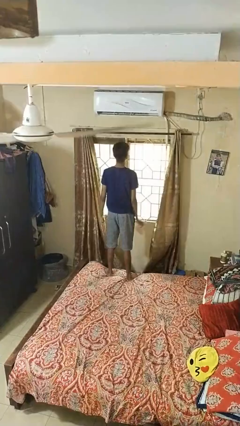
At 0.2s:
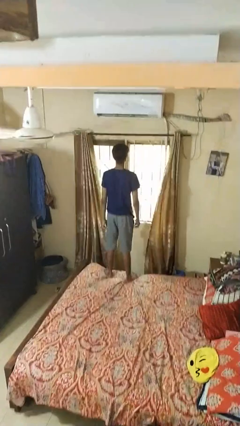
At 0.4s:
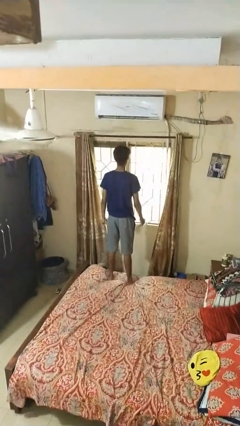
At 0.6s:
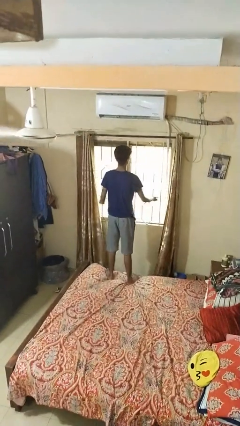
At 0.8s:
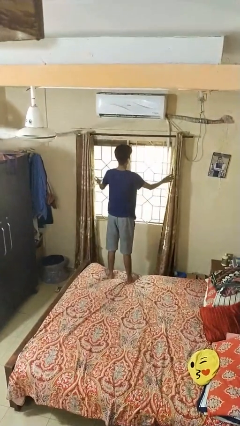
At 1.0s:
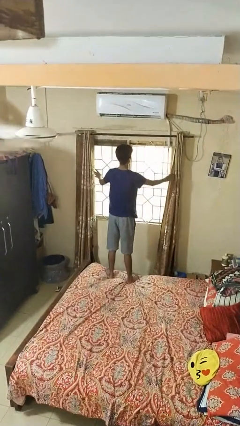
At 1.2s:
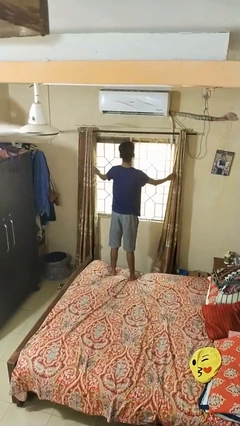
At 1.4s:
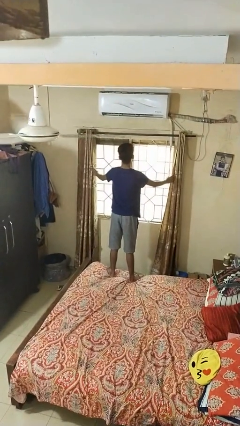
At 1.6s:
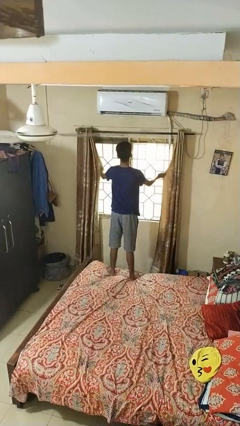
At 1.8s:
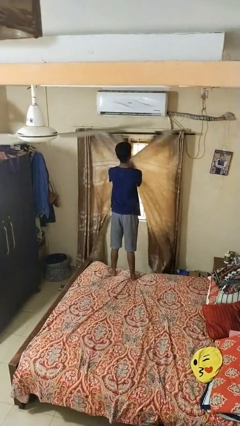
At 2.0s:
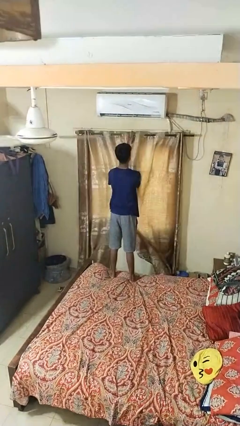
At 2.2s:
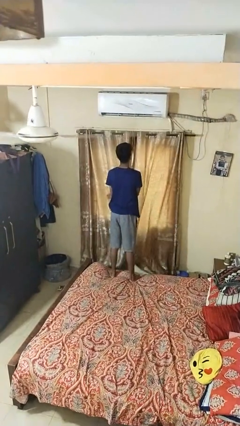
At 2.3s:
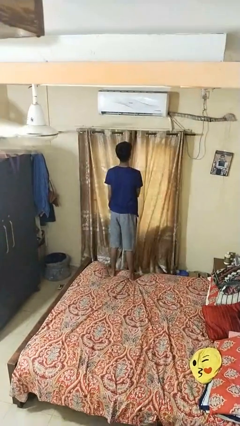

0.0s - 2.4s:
person closes curtains

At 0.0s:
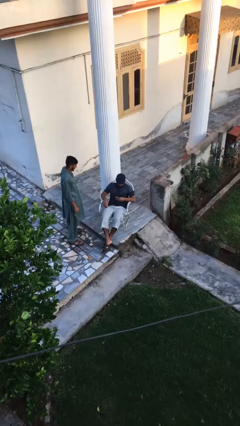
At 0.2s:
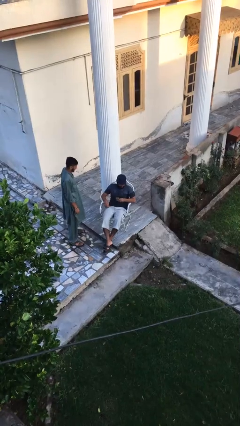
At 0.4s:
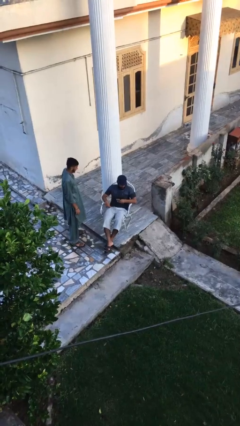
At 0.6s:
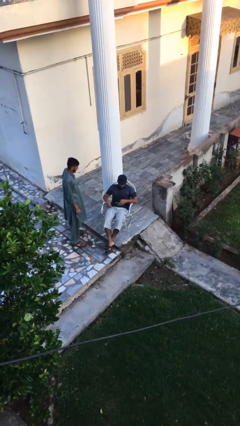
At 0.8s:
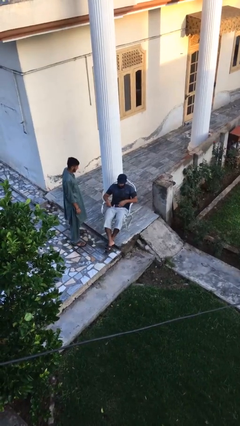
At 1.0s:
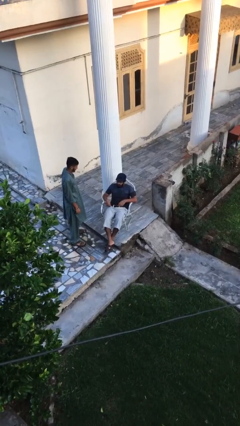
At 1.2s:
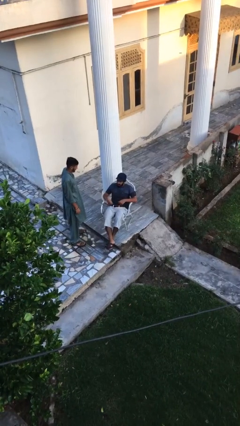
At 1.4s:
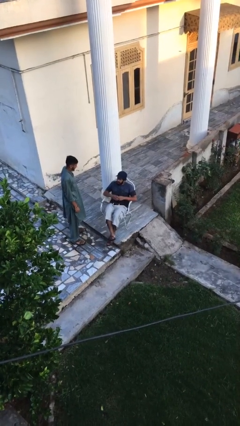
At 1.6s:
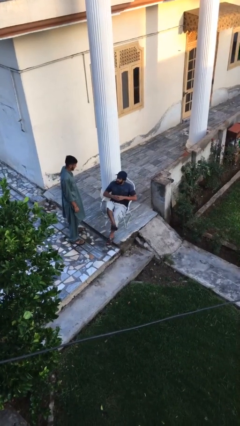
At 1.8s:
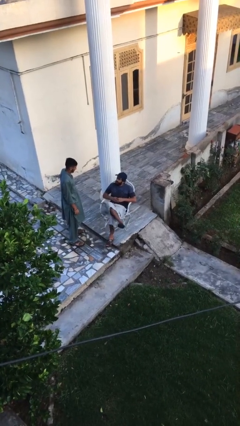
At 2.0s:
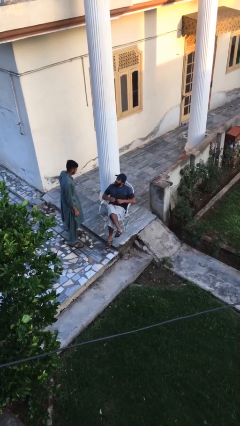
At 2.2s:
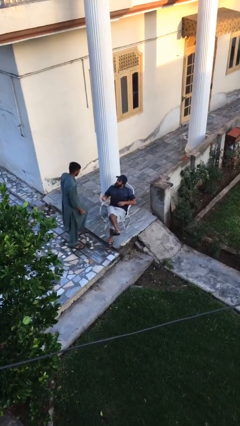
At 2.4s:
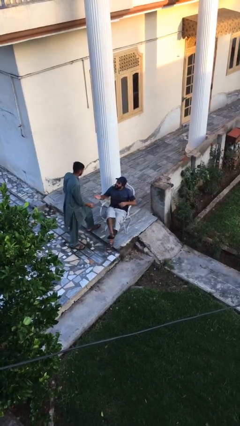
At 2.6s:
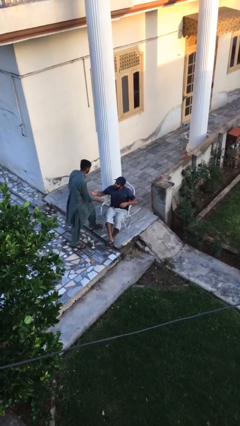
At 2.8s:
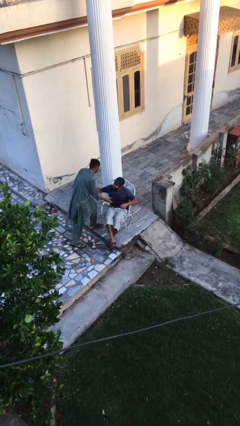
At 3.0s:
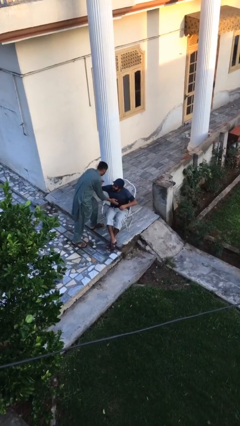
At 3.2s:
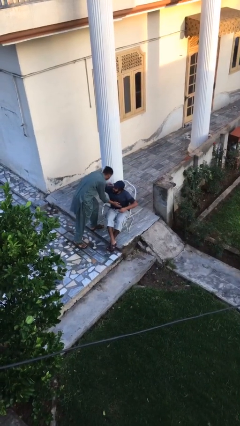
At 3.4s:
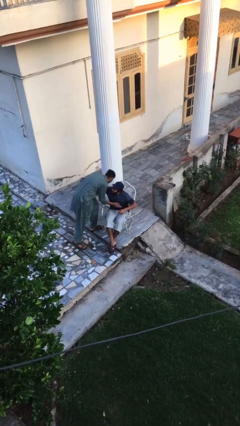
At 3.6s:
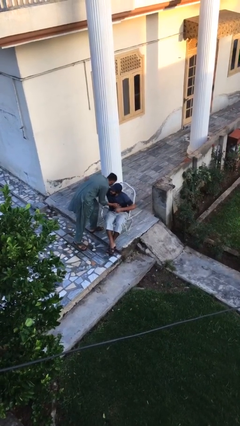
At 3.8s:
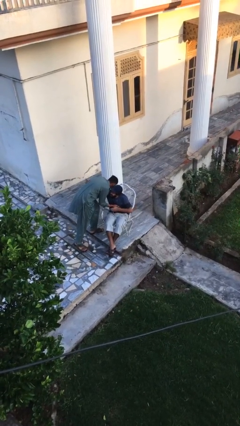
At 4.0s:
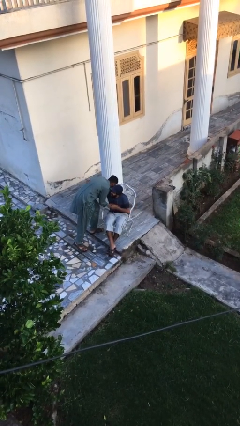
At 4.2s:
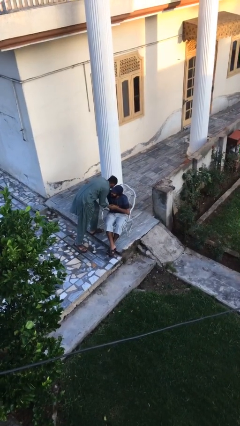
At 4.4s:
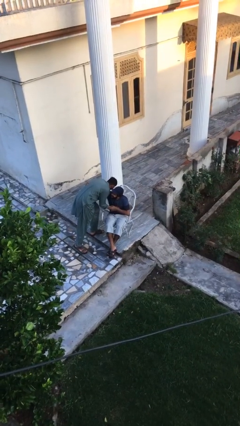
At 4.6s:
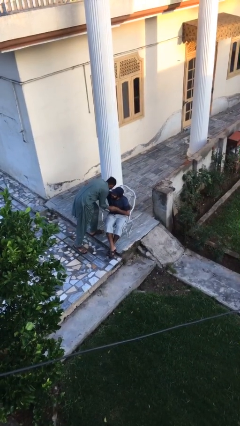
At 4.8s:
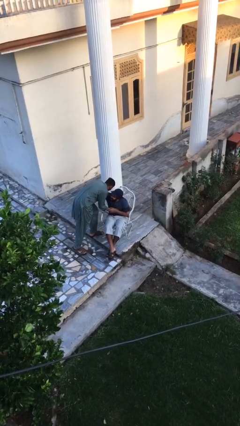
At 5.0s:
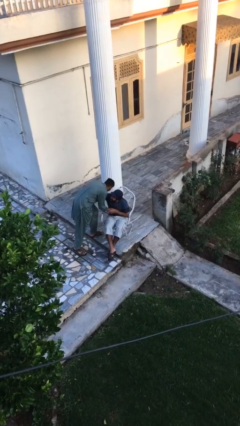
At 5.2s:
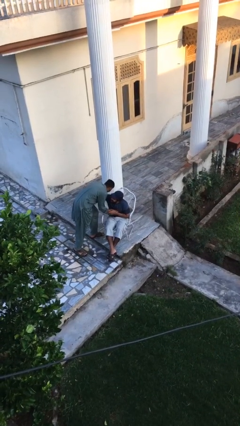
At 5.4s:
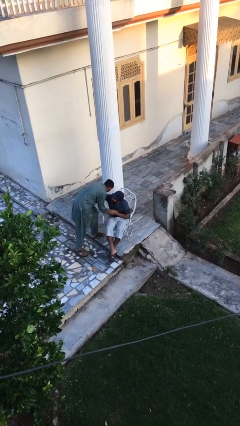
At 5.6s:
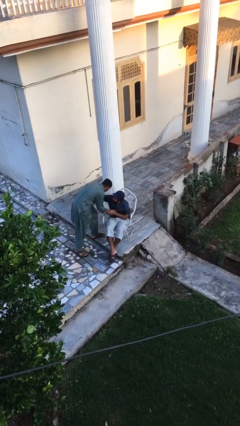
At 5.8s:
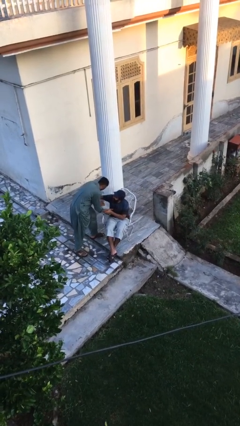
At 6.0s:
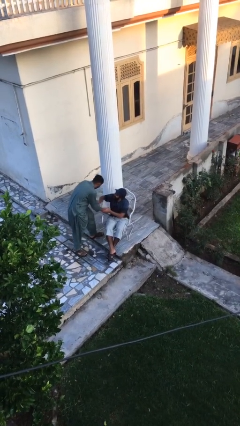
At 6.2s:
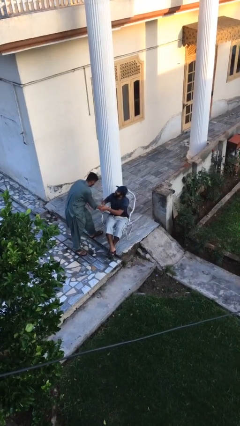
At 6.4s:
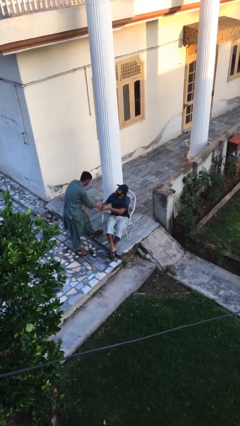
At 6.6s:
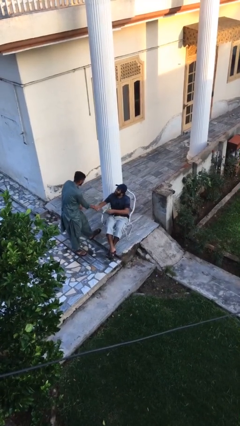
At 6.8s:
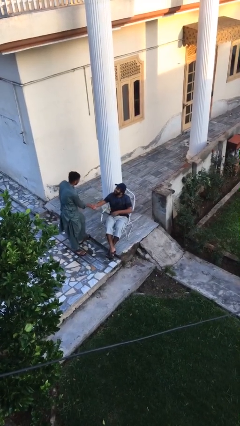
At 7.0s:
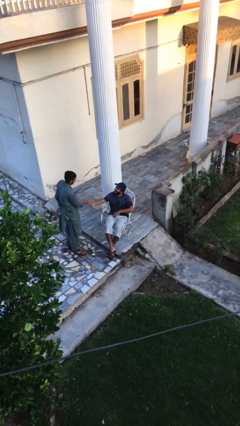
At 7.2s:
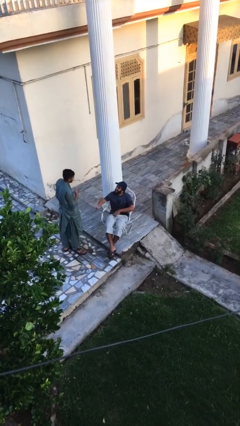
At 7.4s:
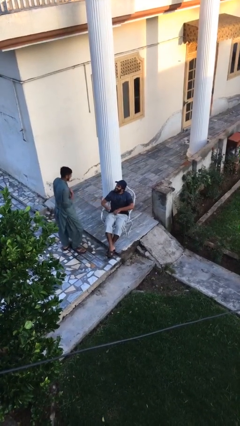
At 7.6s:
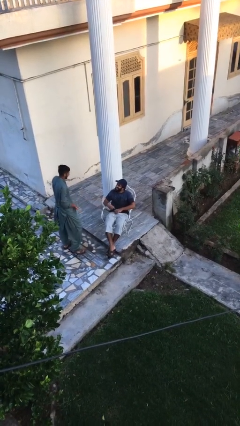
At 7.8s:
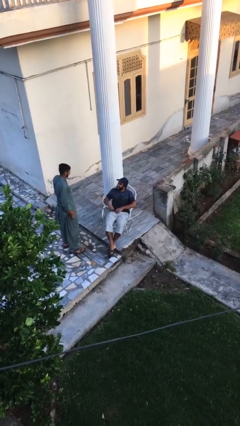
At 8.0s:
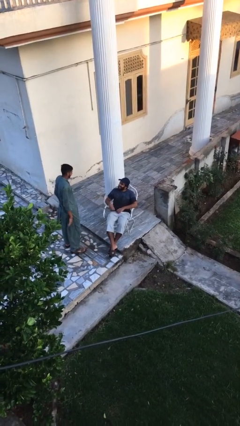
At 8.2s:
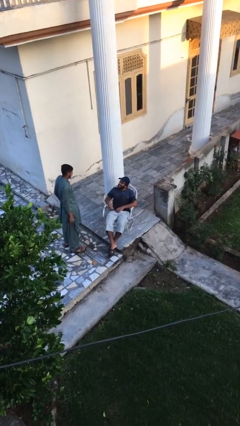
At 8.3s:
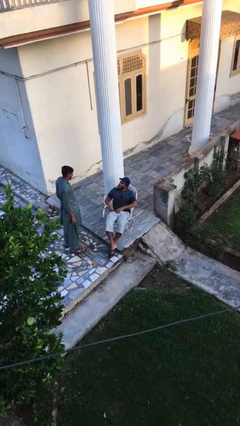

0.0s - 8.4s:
person embraces person

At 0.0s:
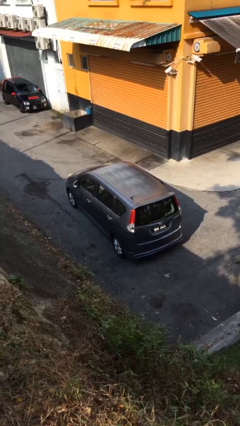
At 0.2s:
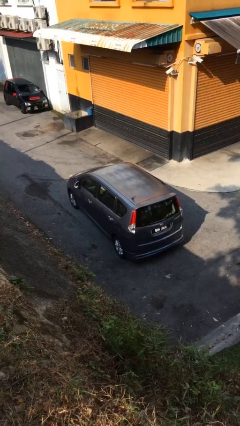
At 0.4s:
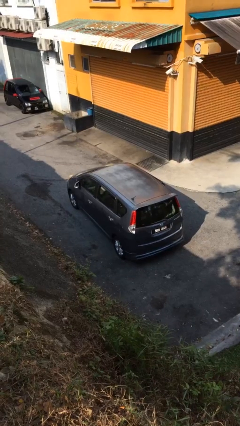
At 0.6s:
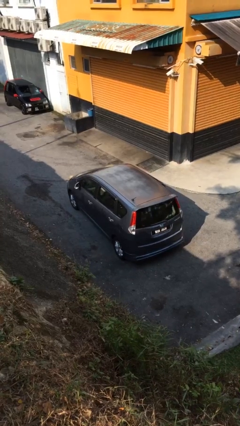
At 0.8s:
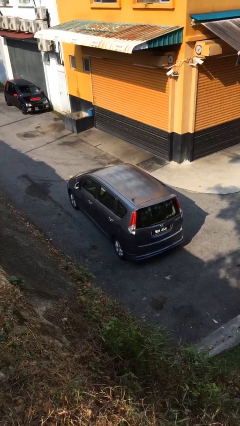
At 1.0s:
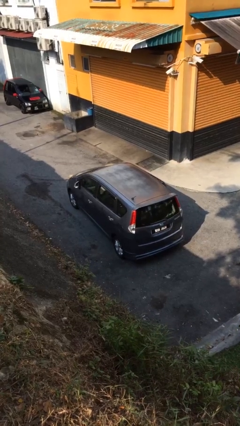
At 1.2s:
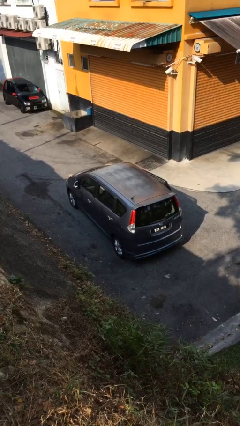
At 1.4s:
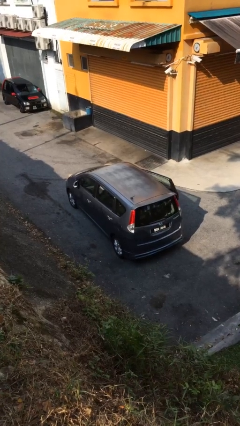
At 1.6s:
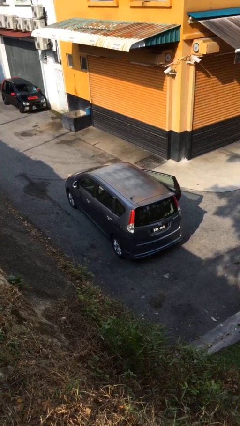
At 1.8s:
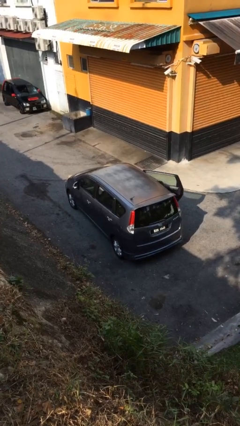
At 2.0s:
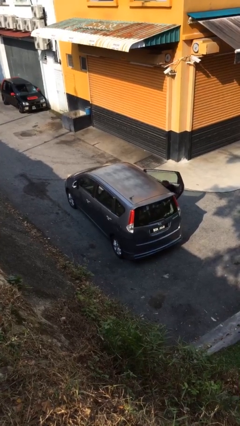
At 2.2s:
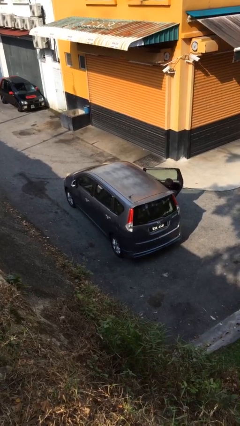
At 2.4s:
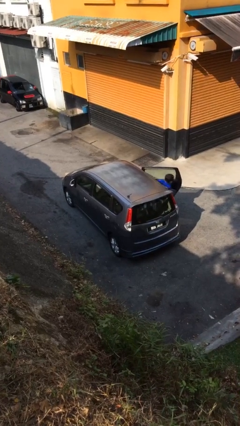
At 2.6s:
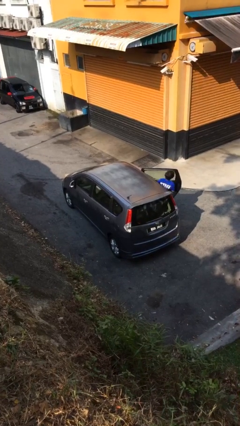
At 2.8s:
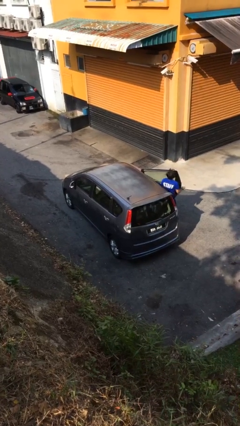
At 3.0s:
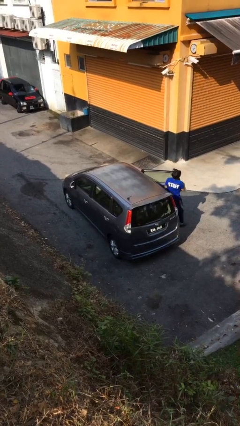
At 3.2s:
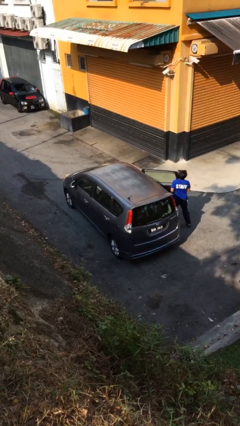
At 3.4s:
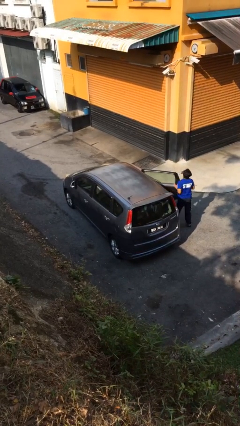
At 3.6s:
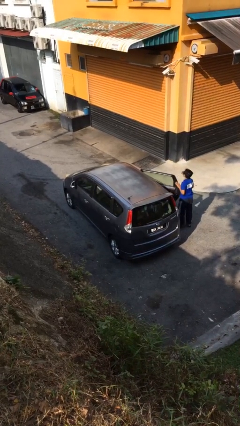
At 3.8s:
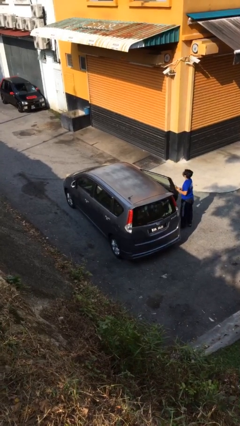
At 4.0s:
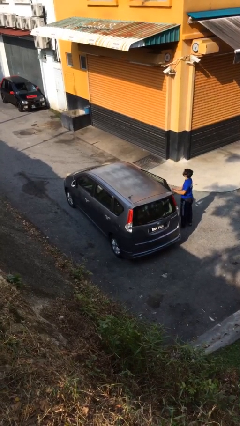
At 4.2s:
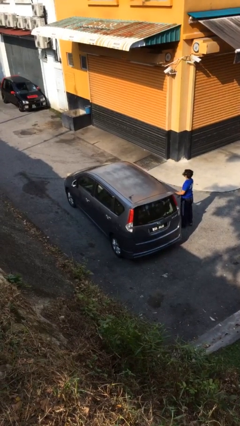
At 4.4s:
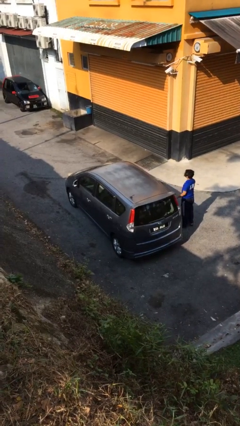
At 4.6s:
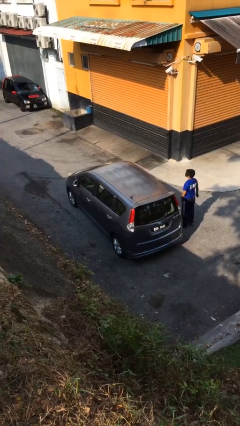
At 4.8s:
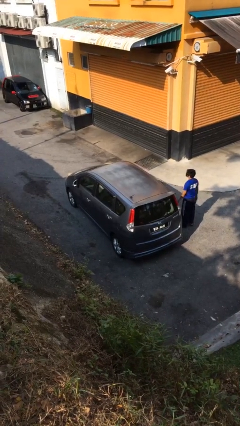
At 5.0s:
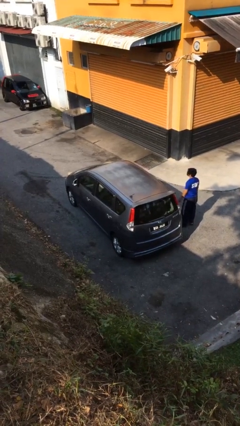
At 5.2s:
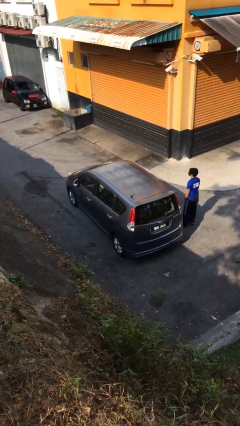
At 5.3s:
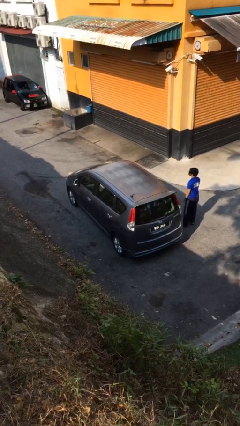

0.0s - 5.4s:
car drops off person

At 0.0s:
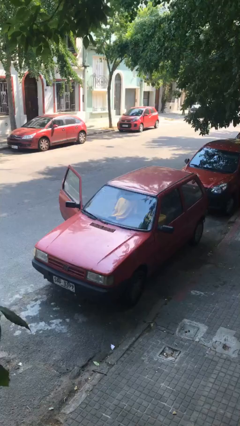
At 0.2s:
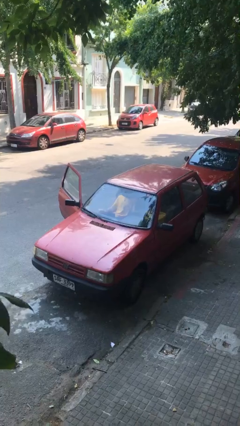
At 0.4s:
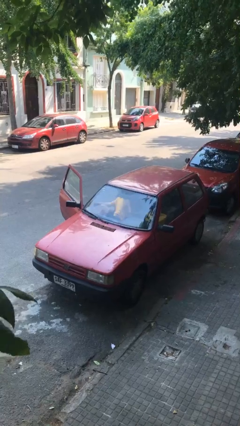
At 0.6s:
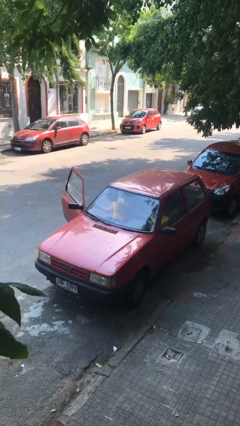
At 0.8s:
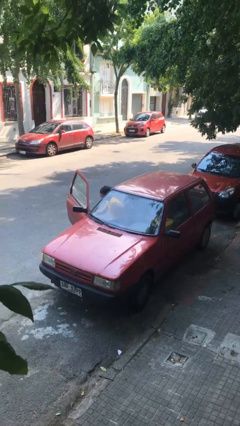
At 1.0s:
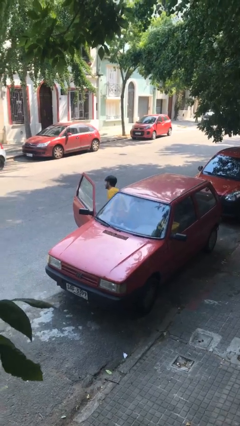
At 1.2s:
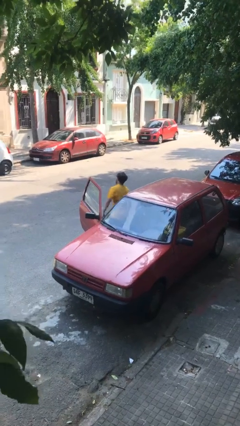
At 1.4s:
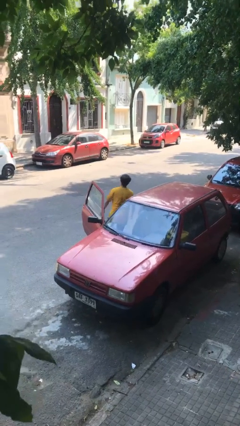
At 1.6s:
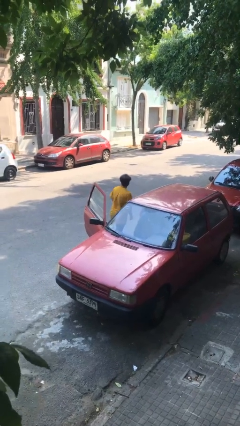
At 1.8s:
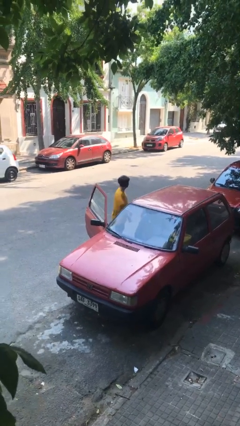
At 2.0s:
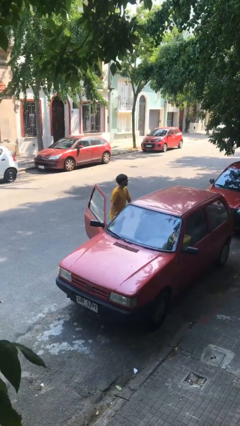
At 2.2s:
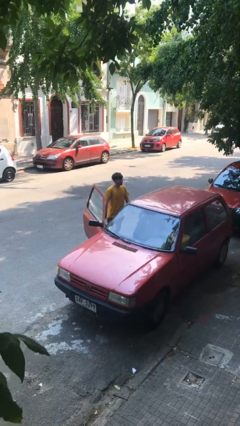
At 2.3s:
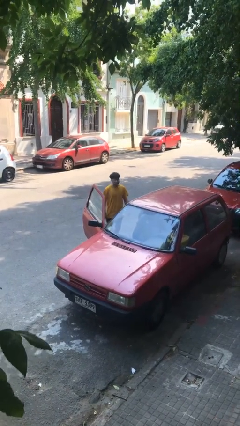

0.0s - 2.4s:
person exits car
